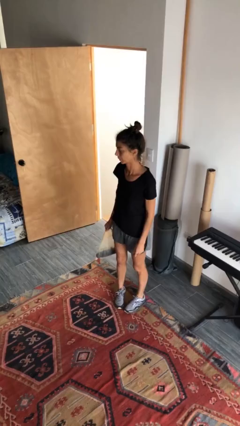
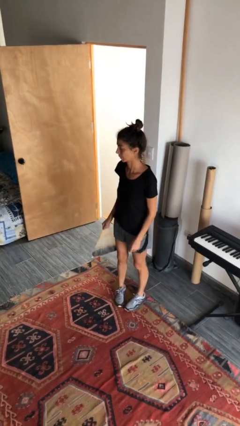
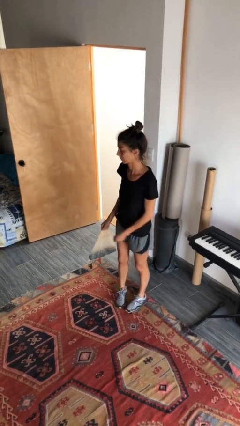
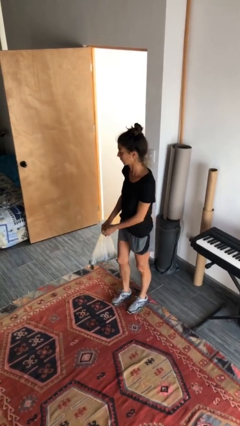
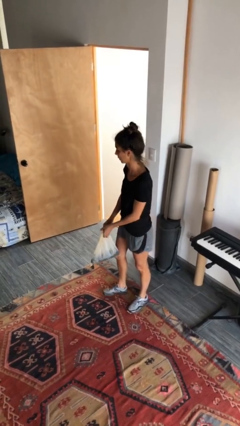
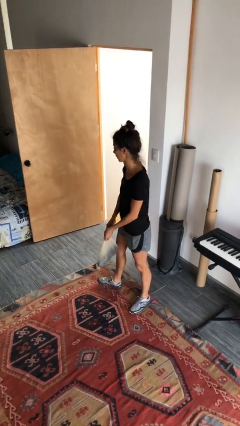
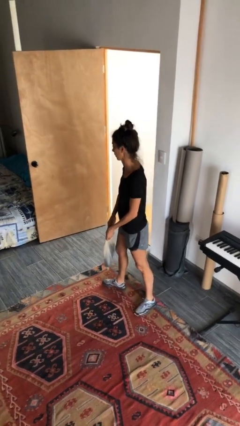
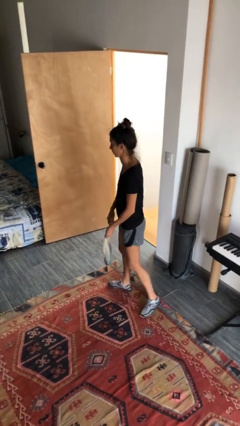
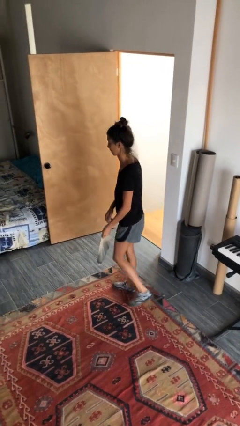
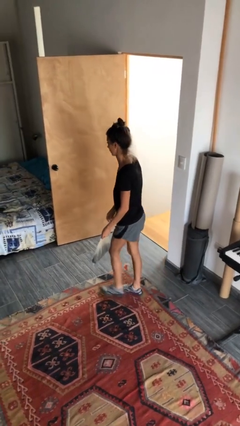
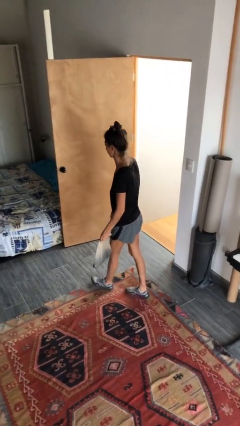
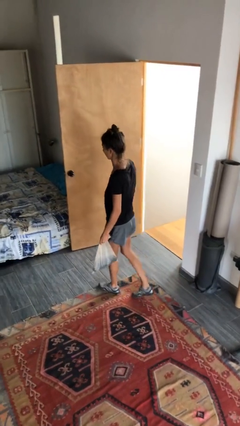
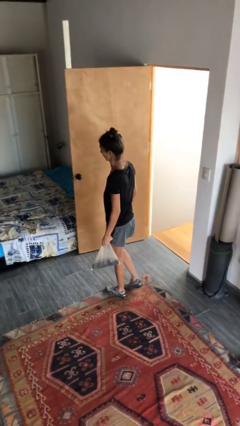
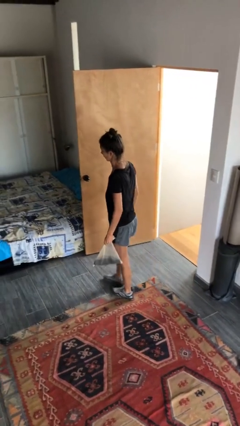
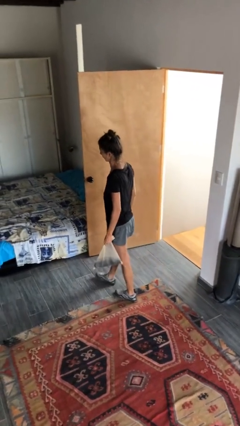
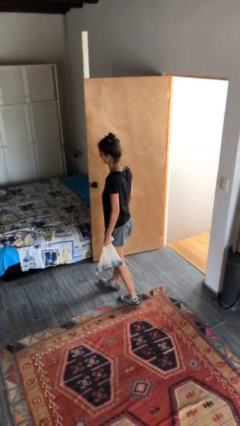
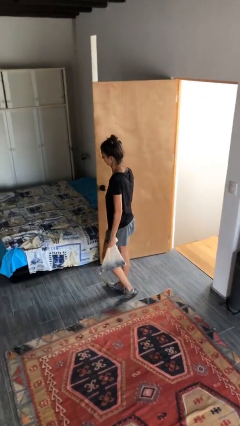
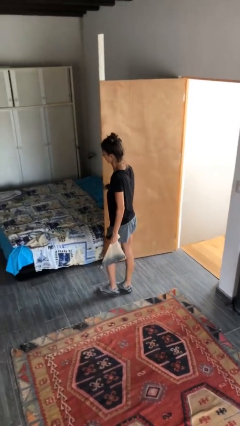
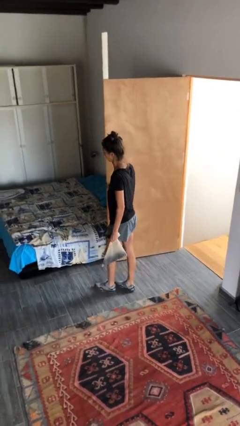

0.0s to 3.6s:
person carries groceries

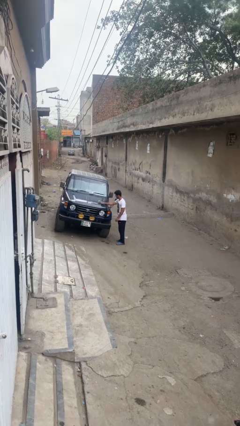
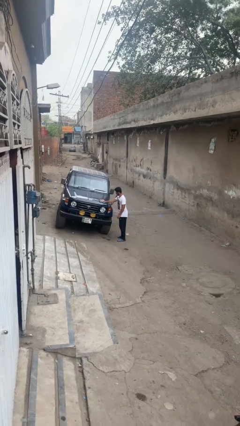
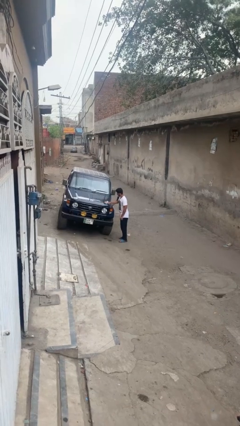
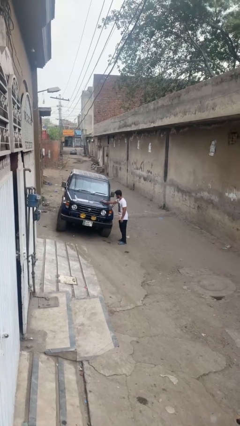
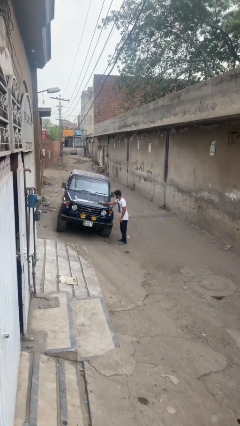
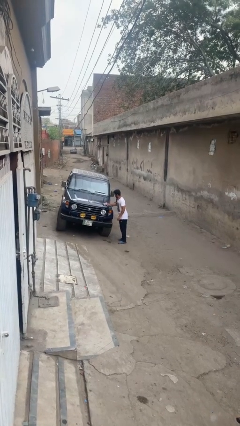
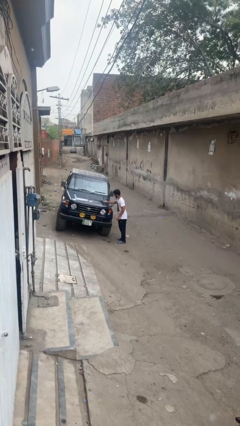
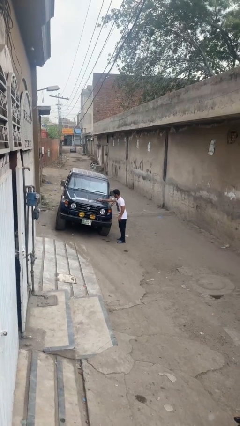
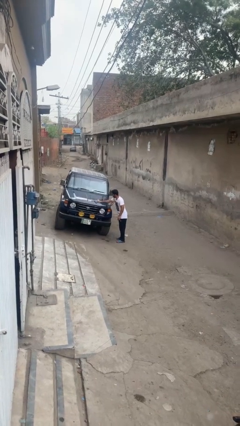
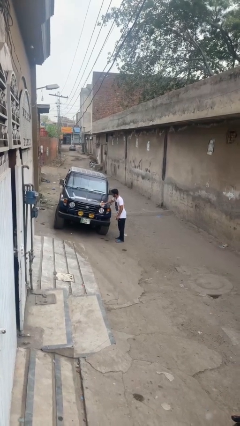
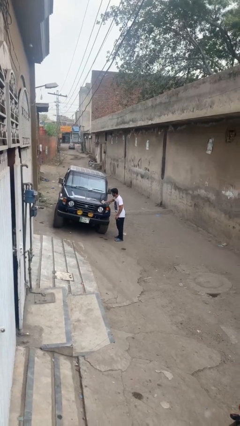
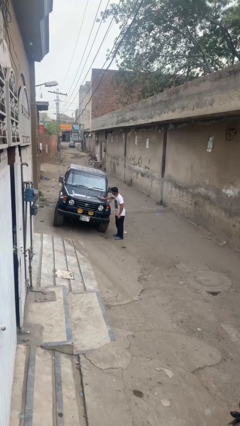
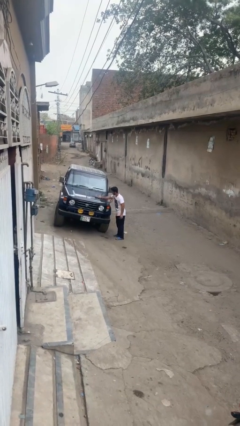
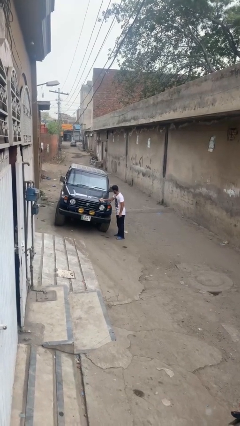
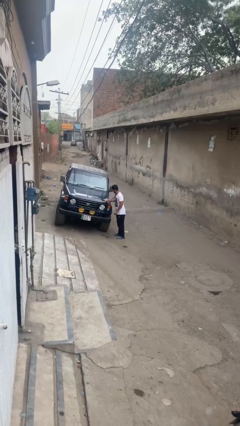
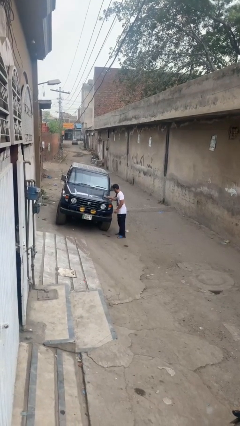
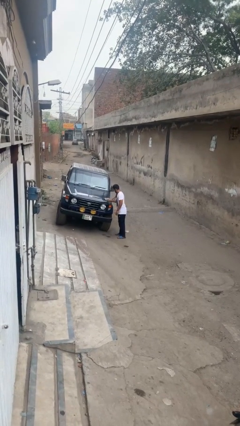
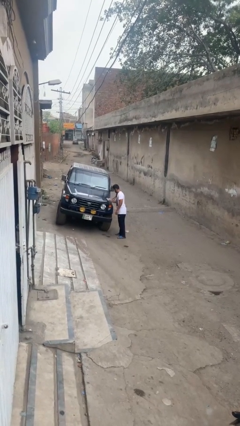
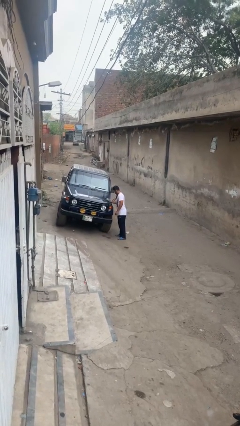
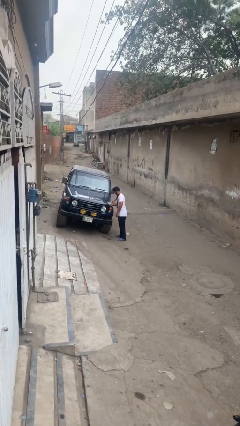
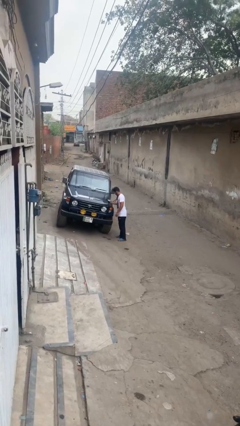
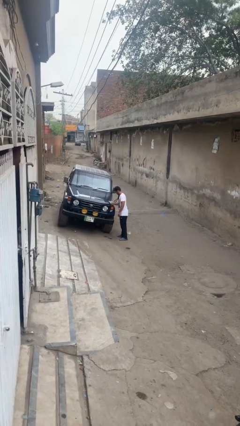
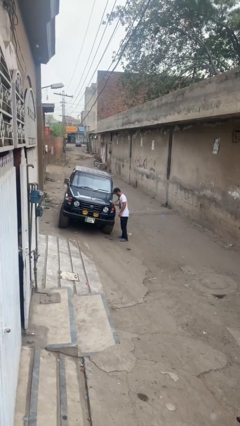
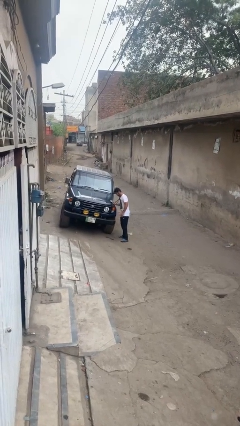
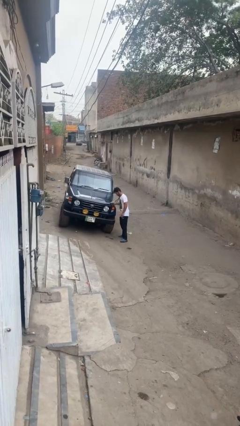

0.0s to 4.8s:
person polishes car with rag

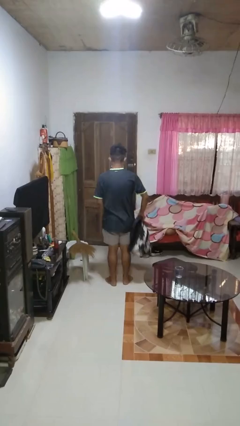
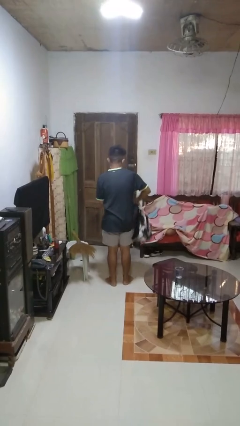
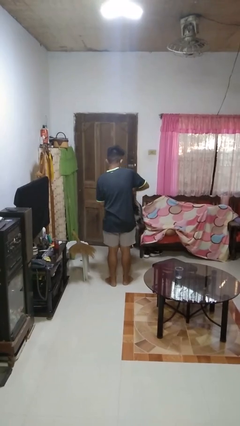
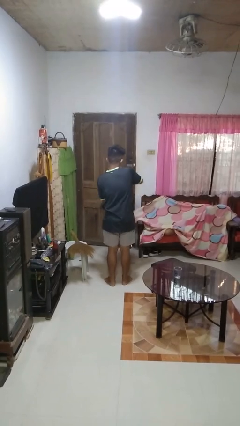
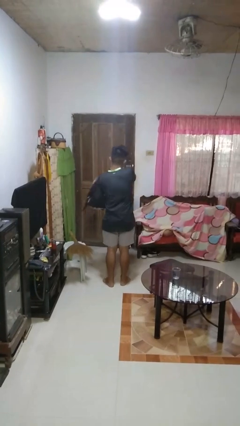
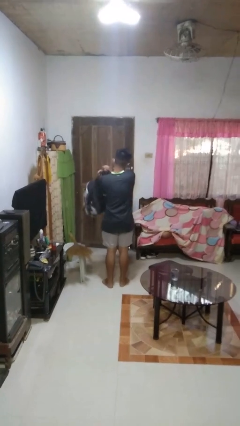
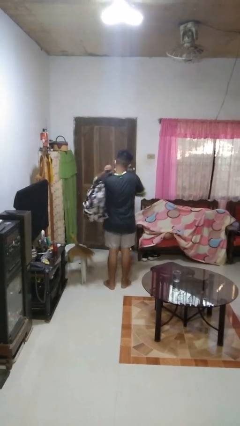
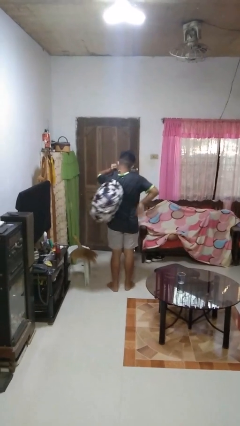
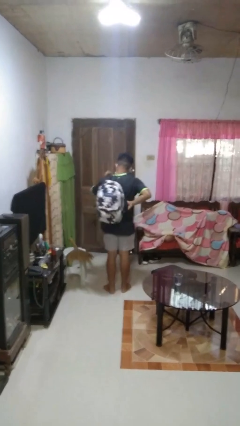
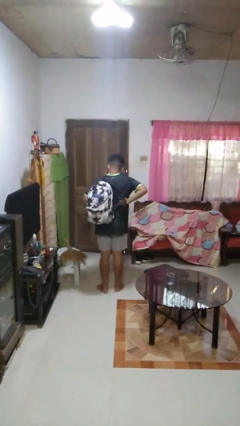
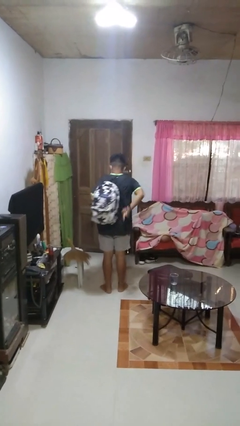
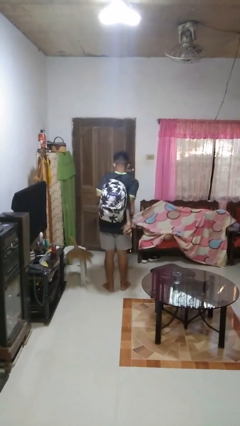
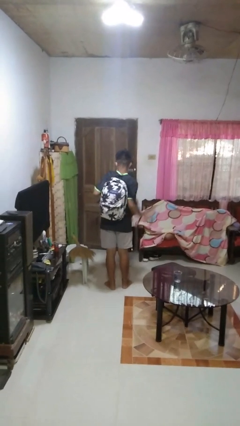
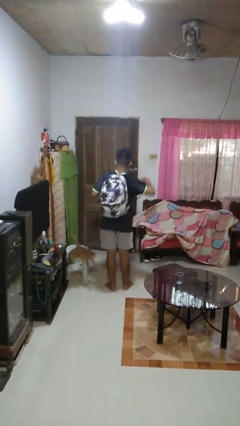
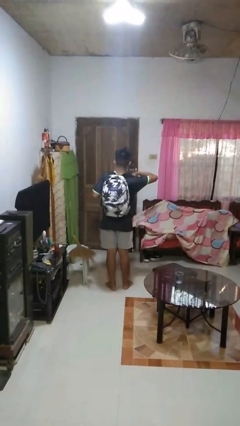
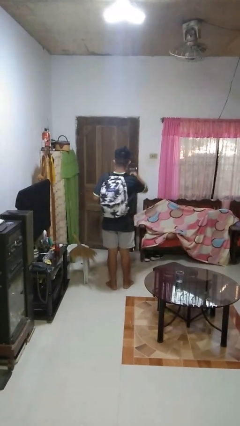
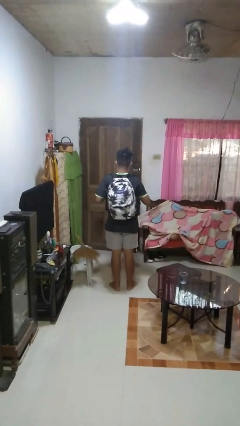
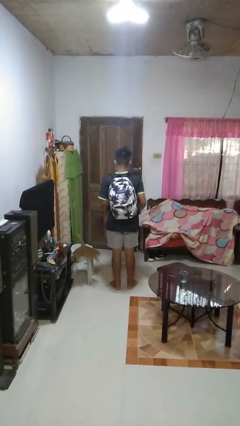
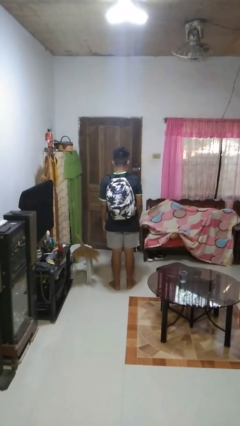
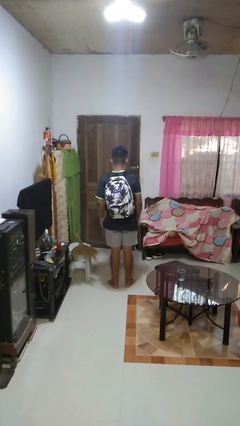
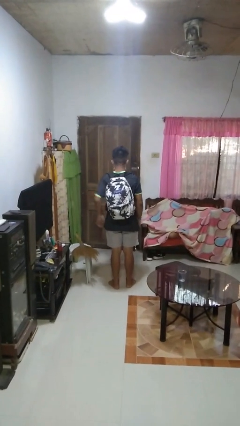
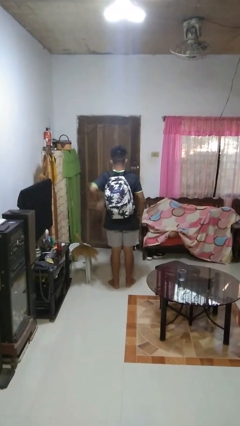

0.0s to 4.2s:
person puts on backpack

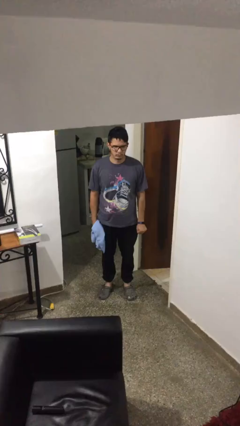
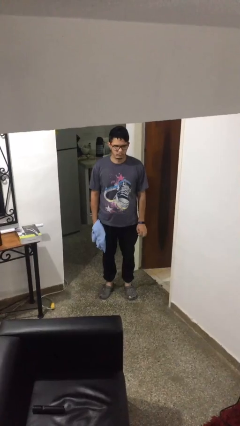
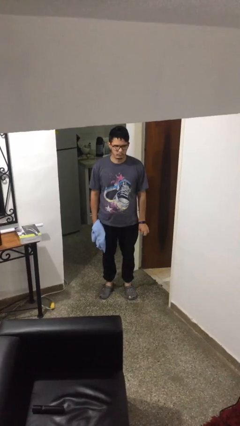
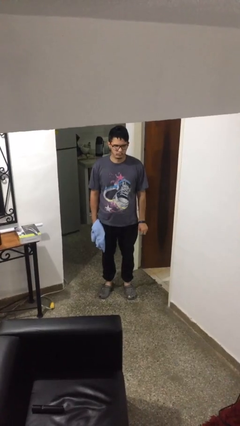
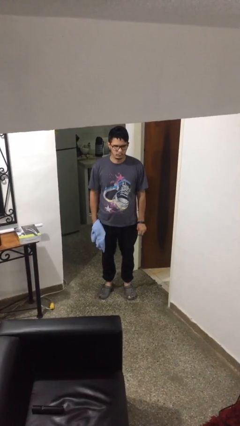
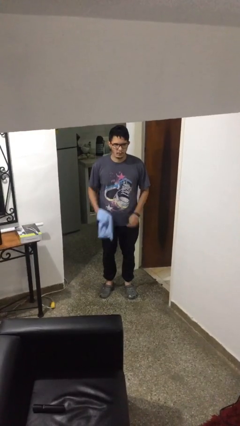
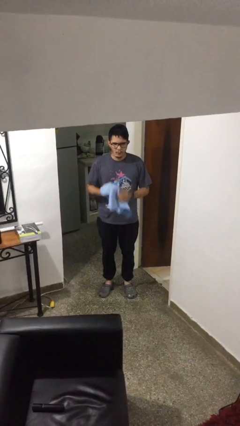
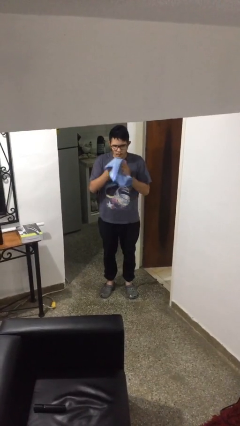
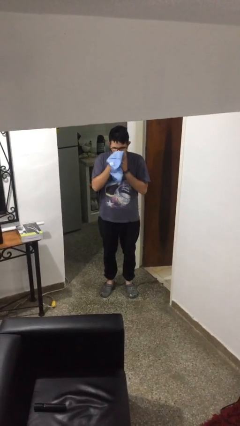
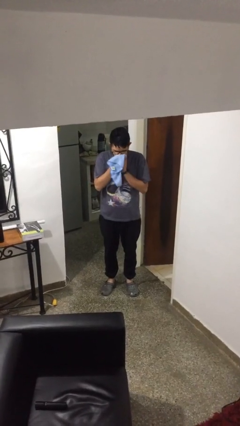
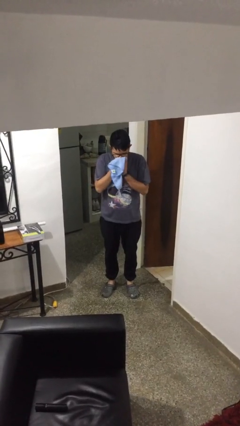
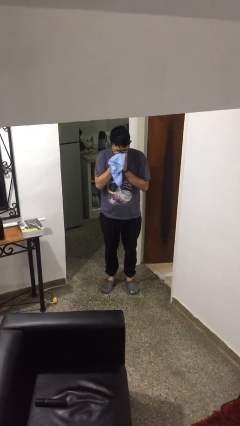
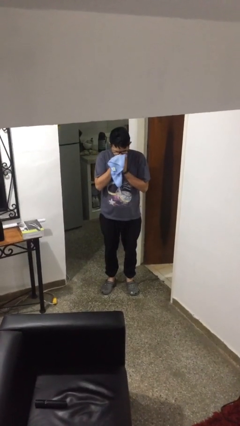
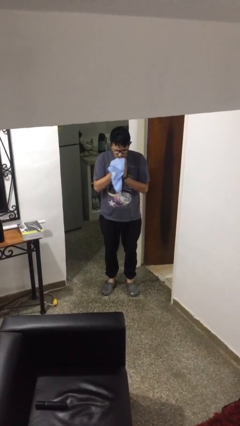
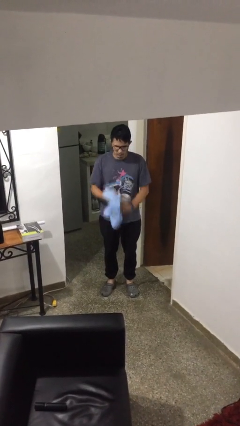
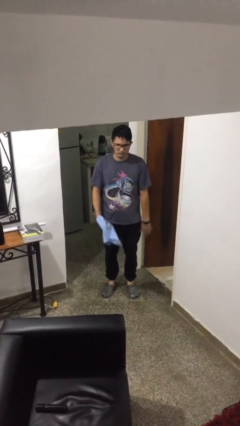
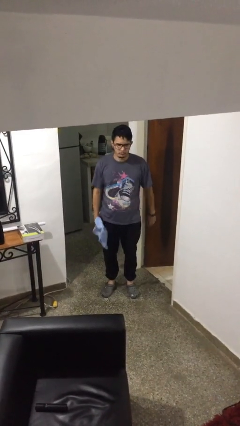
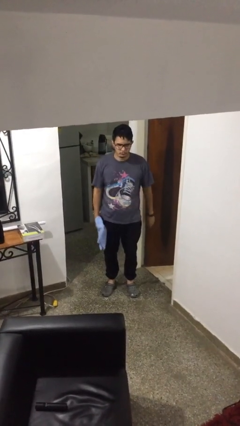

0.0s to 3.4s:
person blows nose

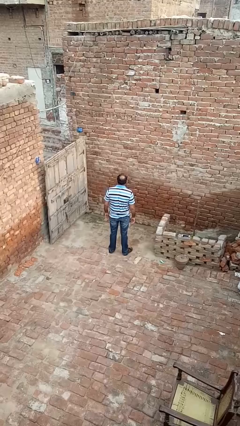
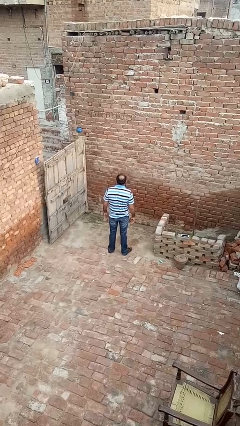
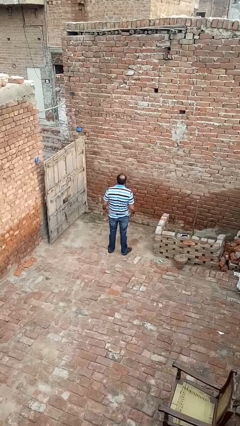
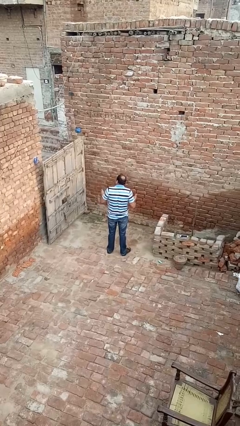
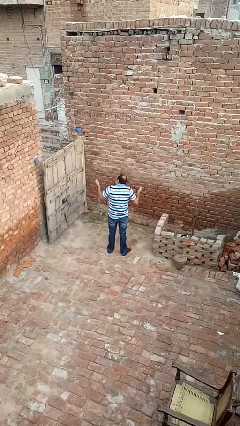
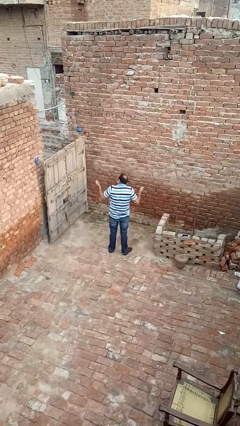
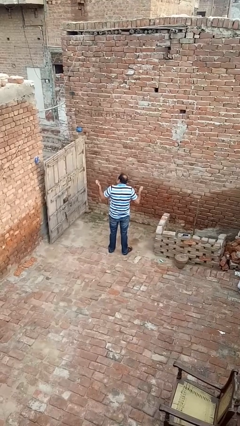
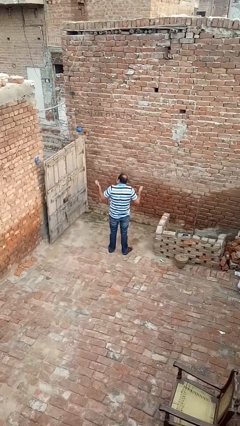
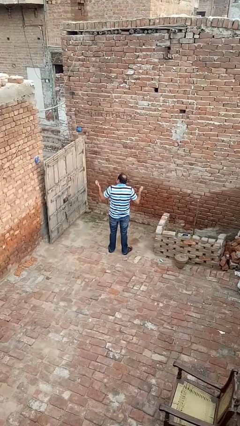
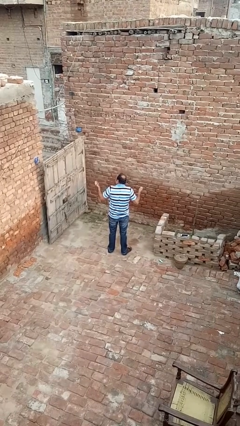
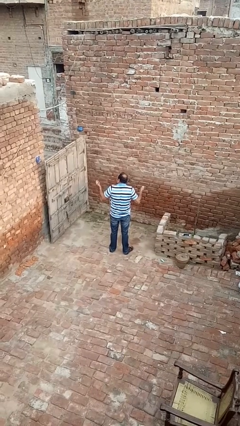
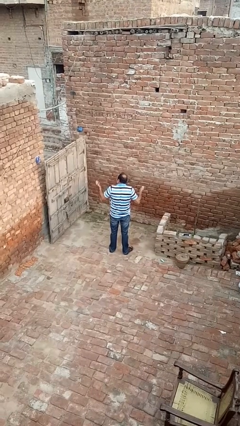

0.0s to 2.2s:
person shrugs
